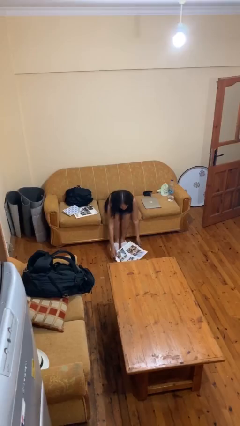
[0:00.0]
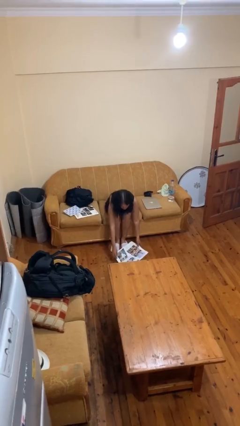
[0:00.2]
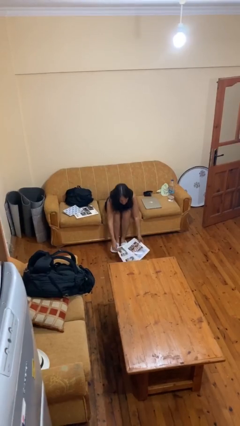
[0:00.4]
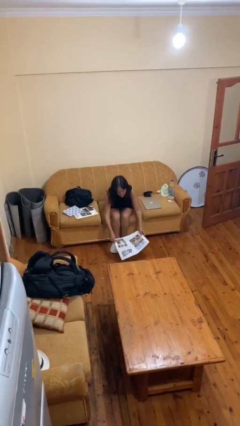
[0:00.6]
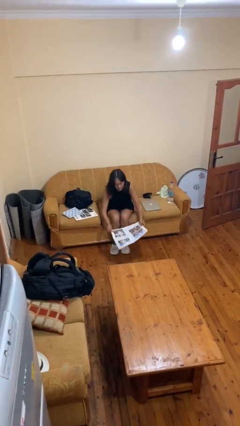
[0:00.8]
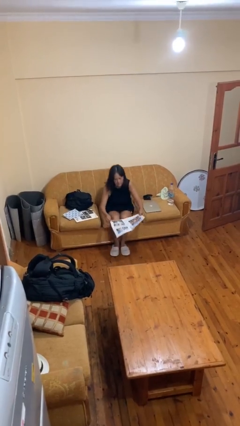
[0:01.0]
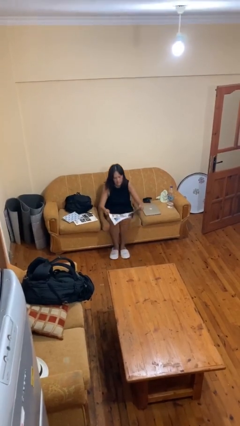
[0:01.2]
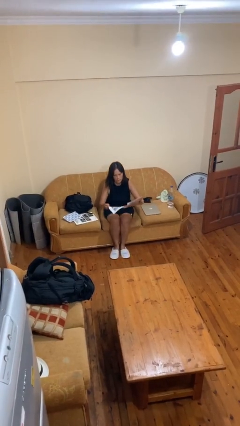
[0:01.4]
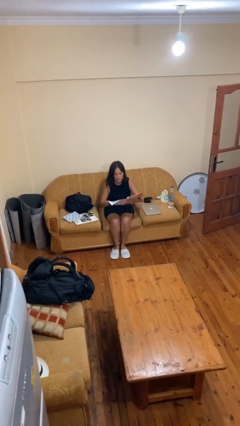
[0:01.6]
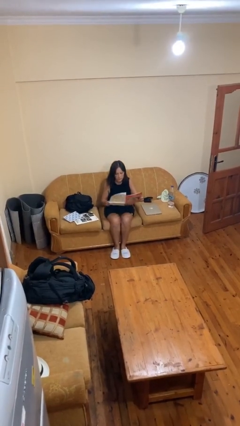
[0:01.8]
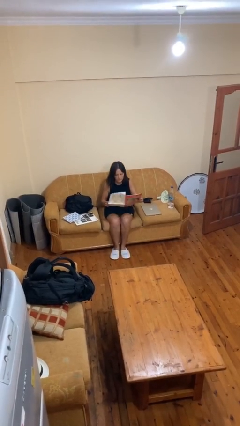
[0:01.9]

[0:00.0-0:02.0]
person picks up object from floor

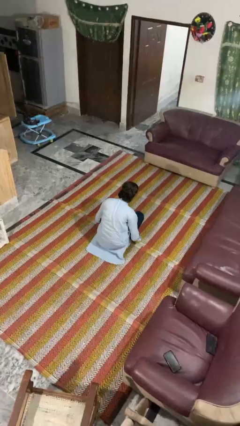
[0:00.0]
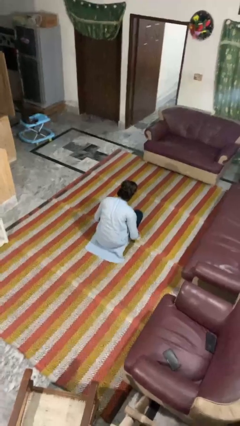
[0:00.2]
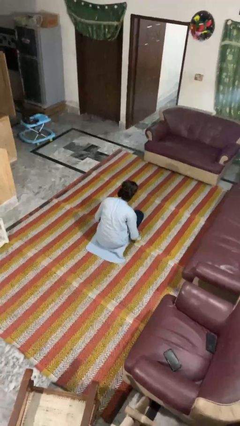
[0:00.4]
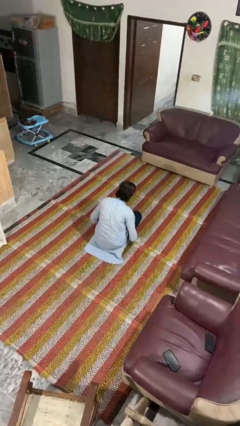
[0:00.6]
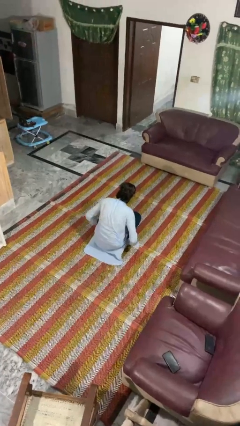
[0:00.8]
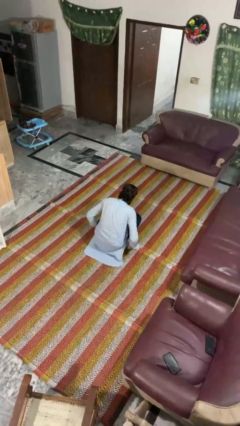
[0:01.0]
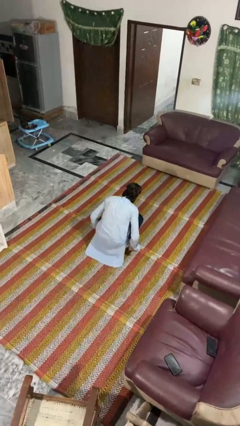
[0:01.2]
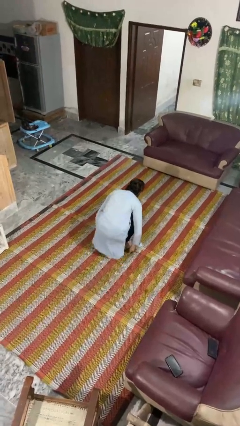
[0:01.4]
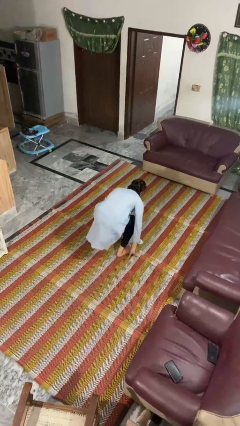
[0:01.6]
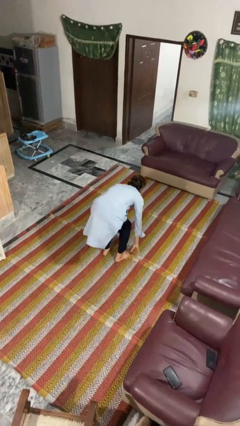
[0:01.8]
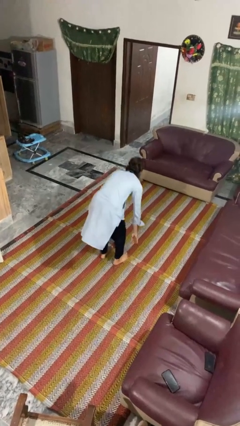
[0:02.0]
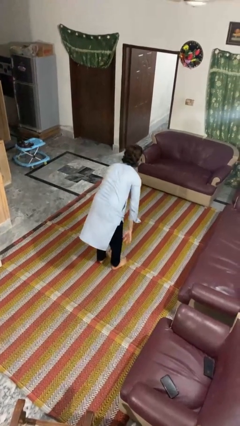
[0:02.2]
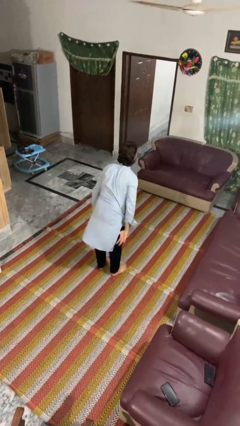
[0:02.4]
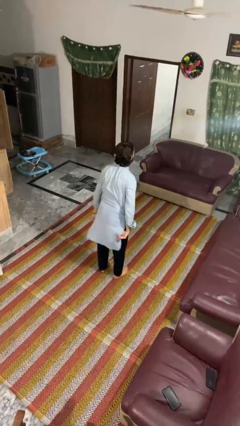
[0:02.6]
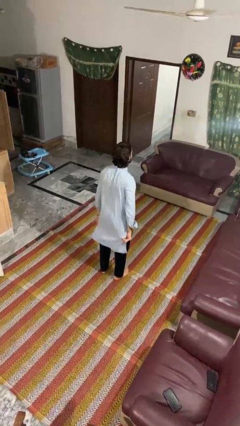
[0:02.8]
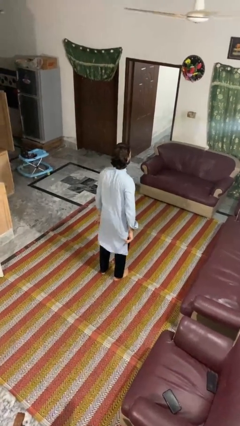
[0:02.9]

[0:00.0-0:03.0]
person stands up

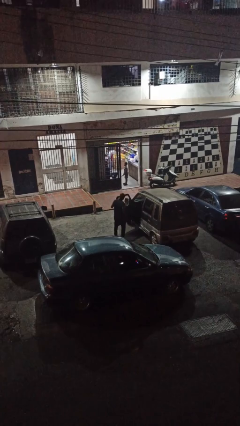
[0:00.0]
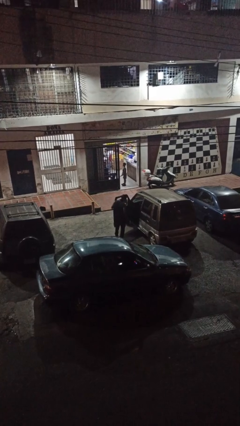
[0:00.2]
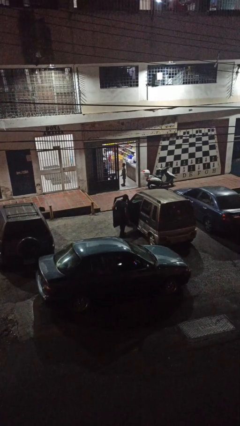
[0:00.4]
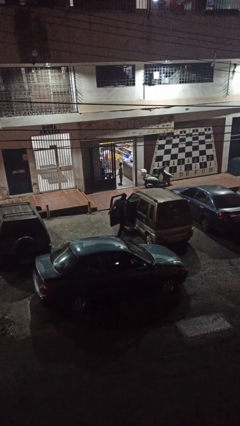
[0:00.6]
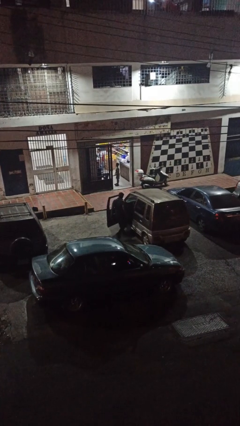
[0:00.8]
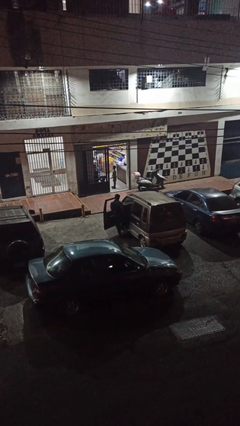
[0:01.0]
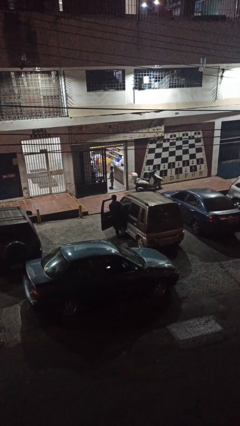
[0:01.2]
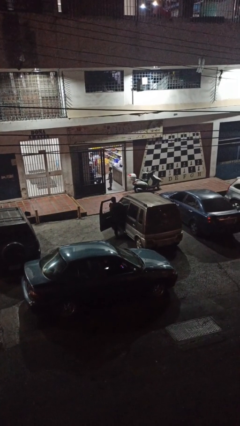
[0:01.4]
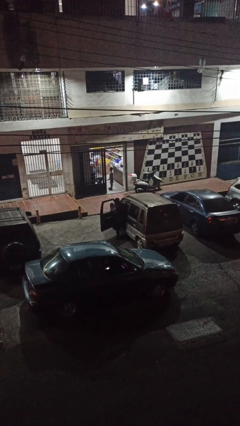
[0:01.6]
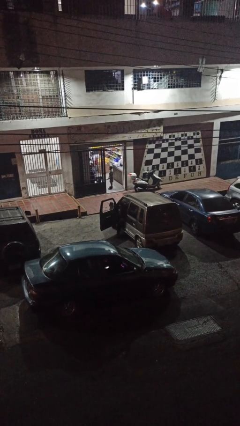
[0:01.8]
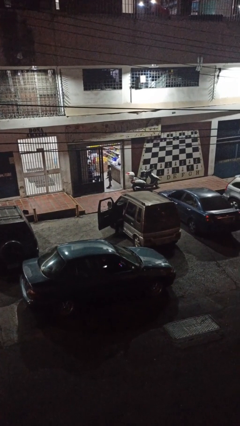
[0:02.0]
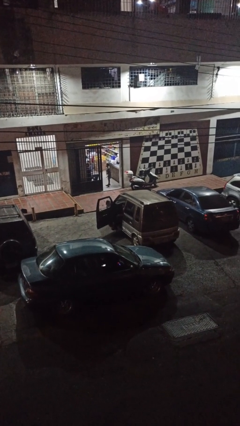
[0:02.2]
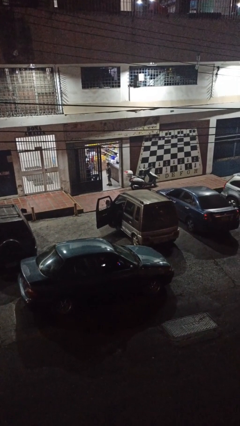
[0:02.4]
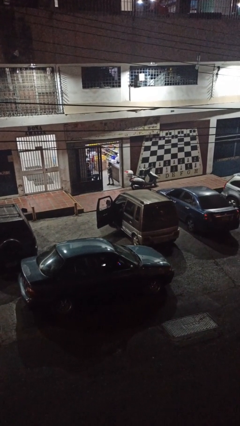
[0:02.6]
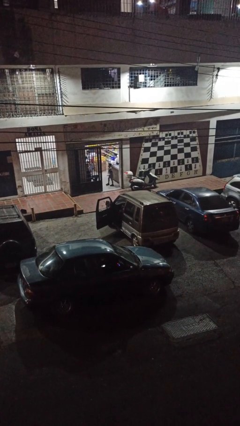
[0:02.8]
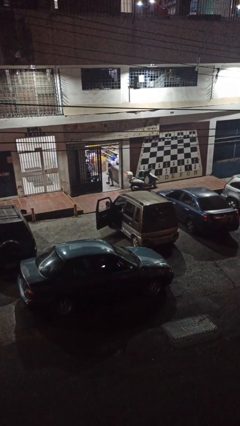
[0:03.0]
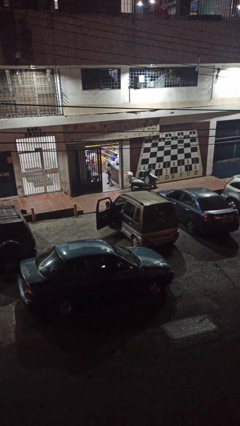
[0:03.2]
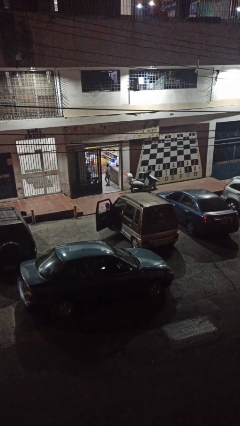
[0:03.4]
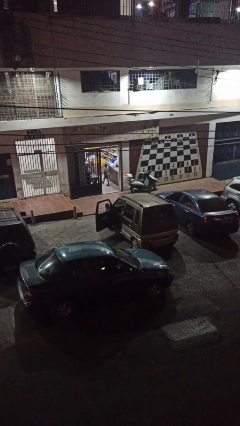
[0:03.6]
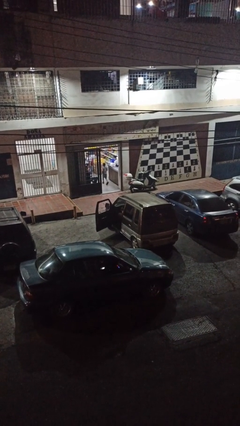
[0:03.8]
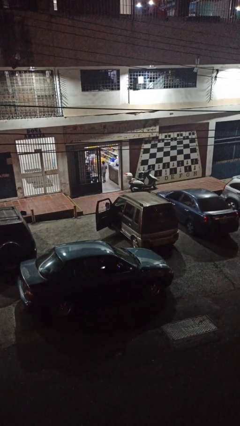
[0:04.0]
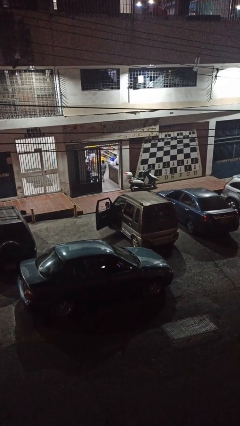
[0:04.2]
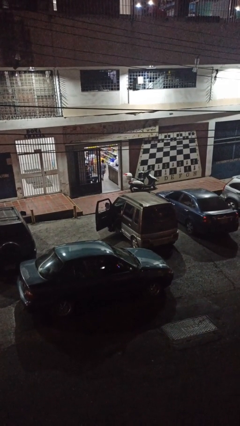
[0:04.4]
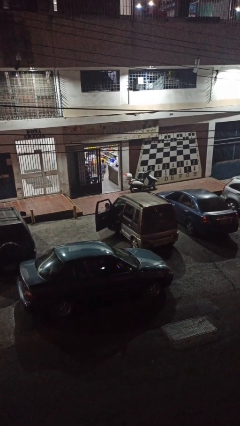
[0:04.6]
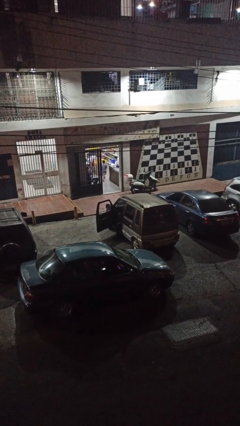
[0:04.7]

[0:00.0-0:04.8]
person enters car

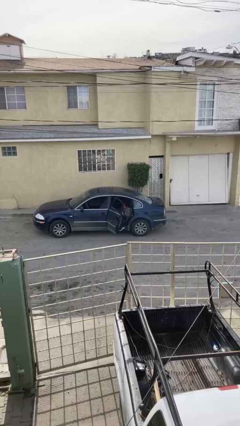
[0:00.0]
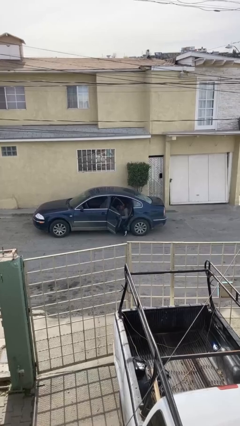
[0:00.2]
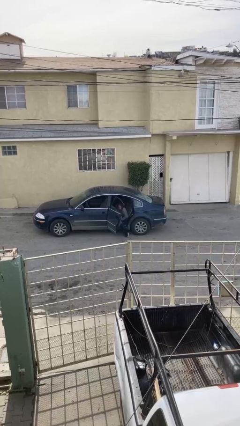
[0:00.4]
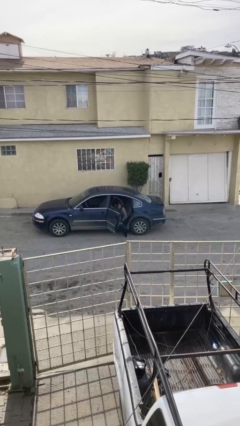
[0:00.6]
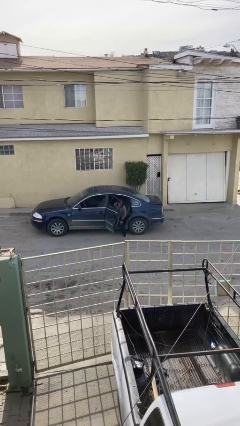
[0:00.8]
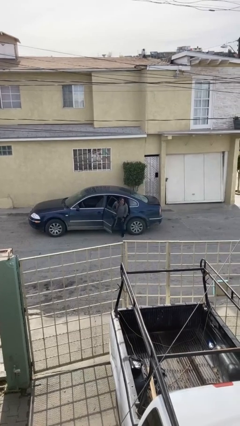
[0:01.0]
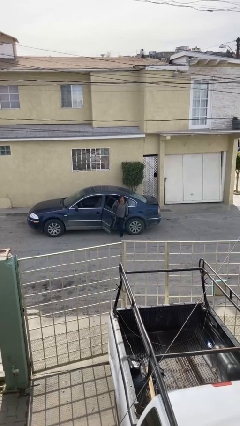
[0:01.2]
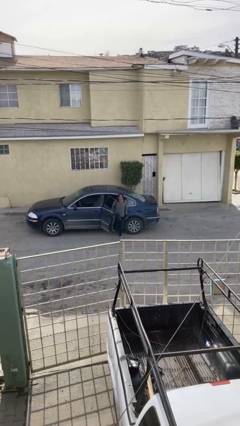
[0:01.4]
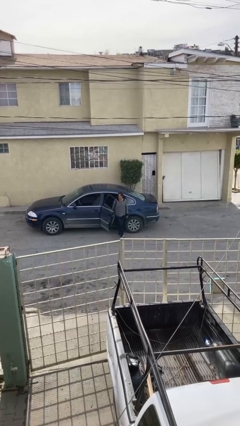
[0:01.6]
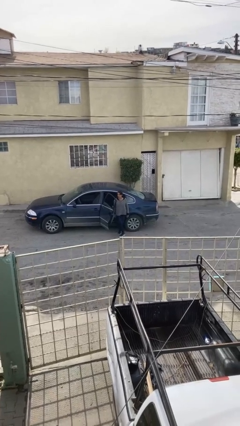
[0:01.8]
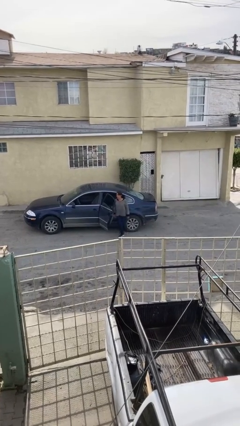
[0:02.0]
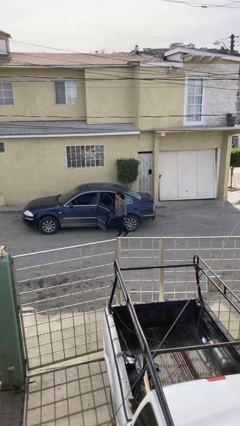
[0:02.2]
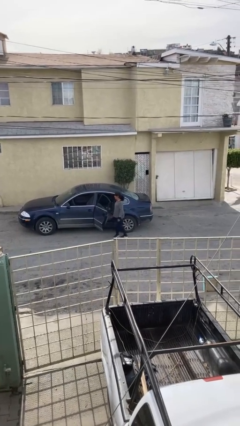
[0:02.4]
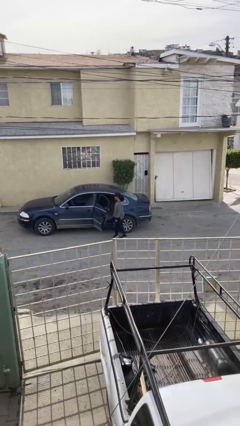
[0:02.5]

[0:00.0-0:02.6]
person exits car

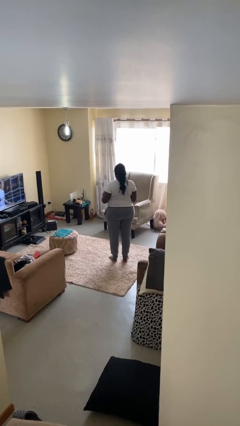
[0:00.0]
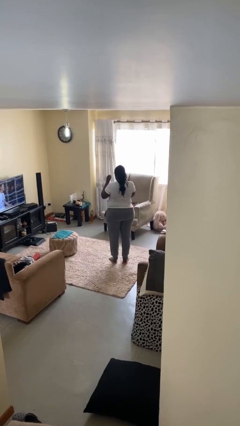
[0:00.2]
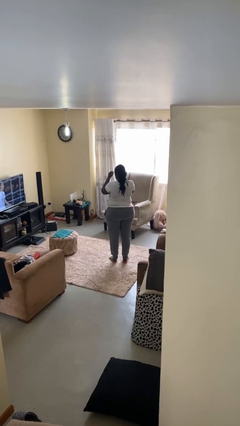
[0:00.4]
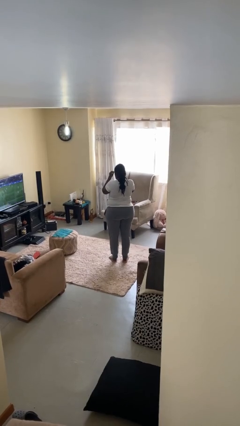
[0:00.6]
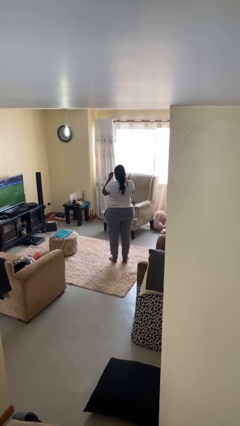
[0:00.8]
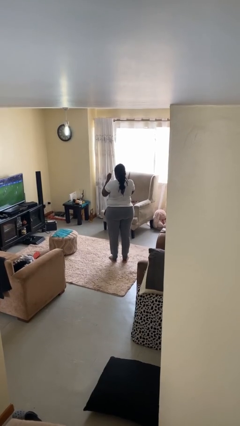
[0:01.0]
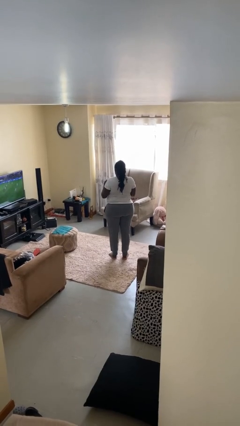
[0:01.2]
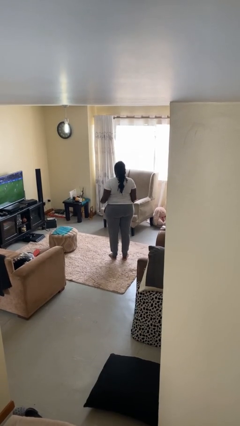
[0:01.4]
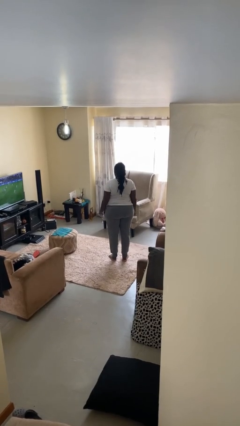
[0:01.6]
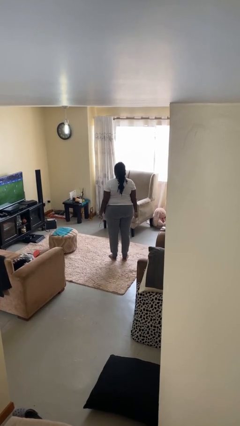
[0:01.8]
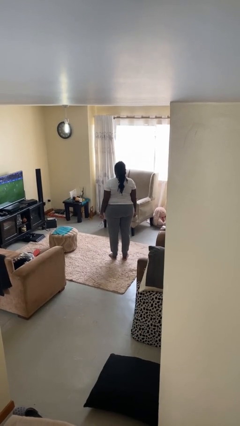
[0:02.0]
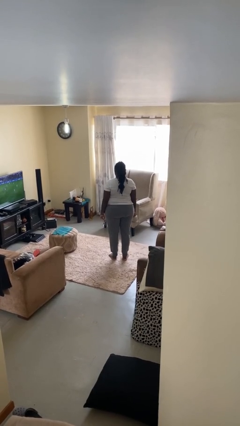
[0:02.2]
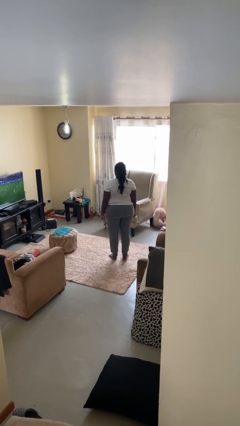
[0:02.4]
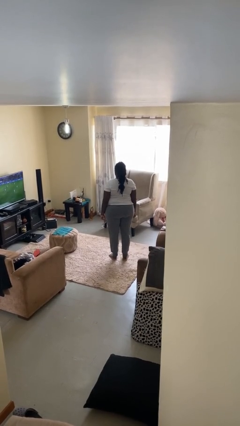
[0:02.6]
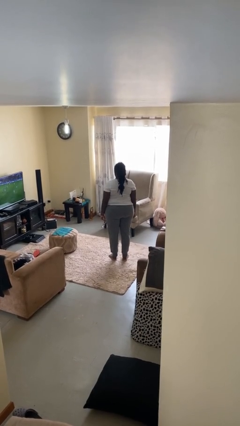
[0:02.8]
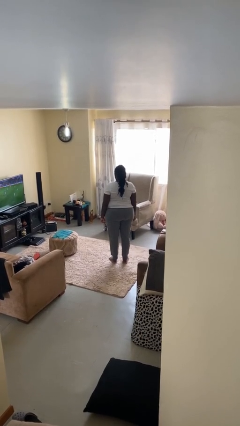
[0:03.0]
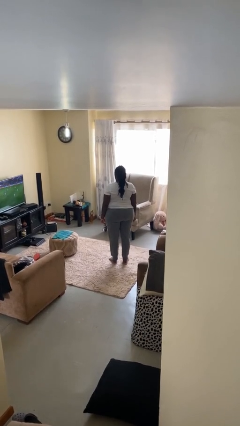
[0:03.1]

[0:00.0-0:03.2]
person takes off glasses

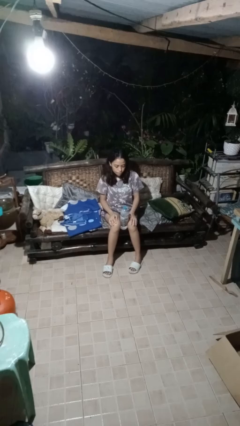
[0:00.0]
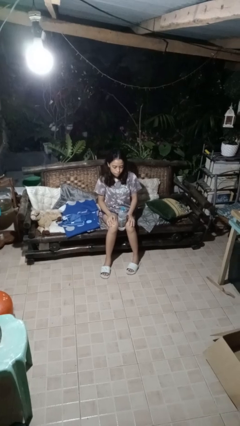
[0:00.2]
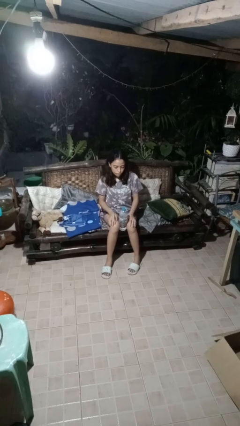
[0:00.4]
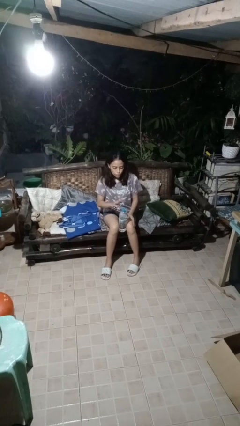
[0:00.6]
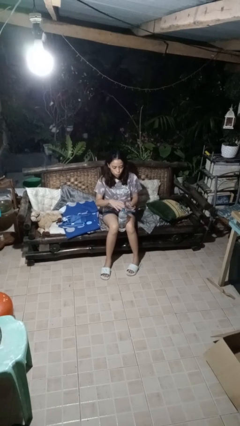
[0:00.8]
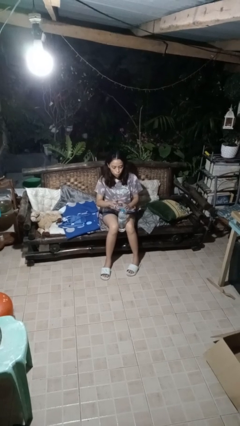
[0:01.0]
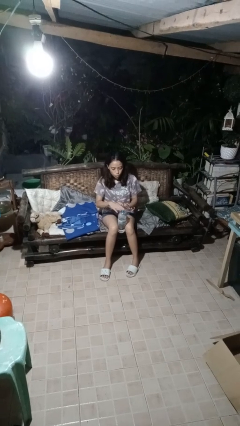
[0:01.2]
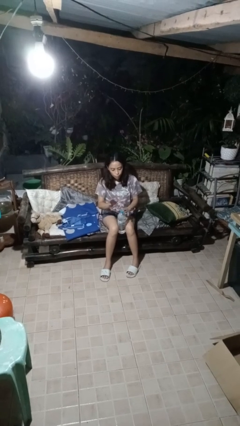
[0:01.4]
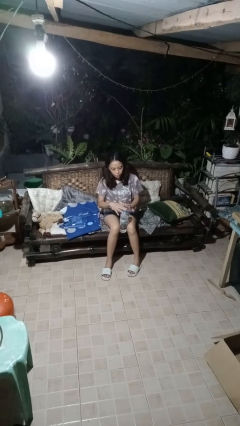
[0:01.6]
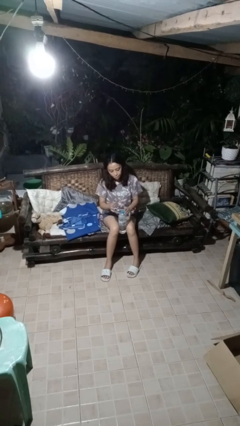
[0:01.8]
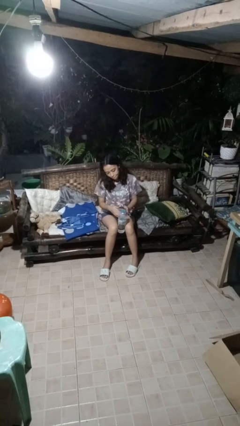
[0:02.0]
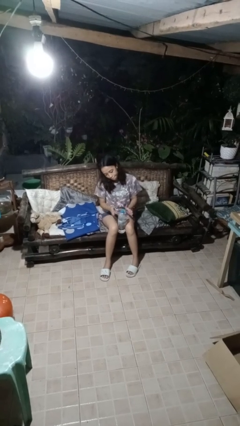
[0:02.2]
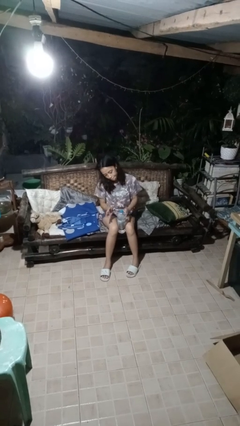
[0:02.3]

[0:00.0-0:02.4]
person taps object with finger
